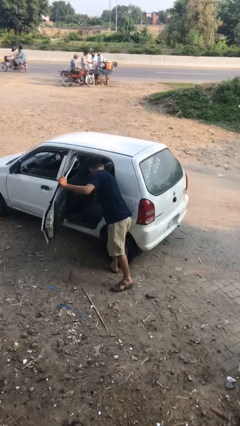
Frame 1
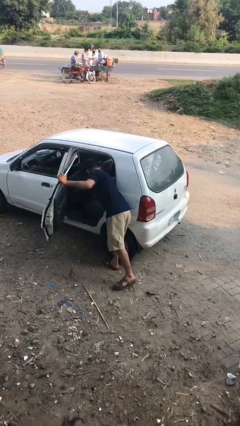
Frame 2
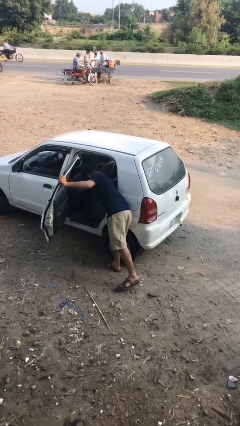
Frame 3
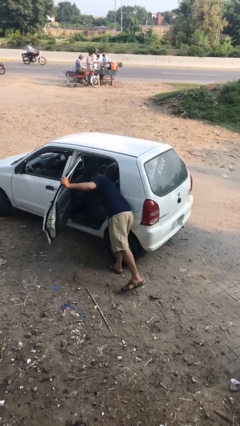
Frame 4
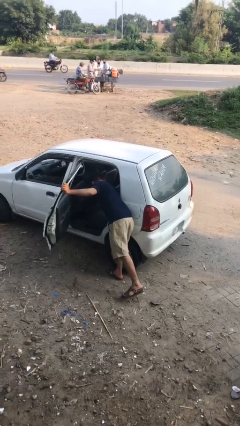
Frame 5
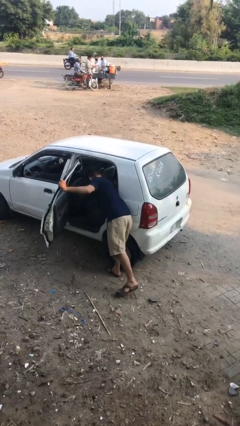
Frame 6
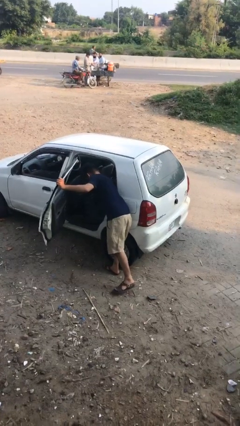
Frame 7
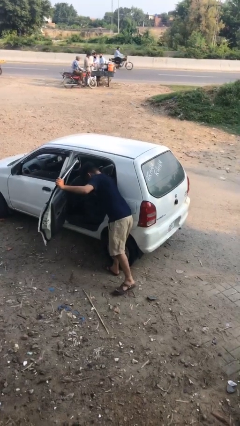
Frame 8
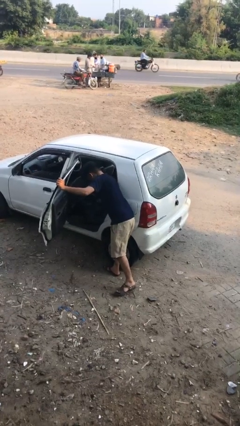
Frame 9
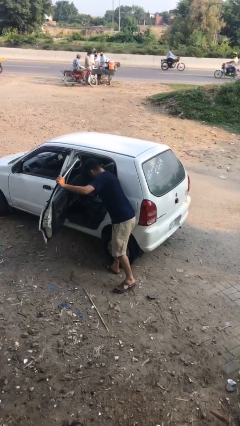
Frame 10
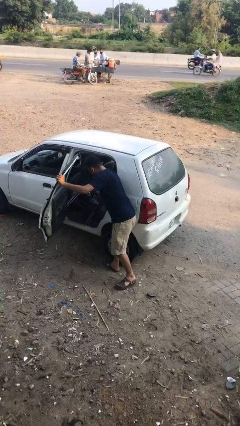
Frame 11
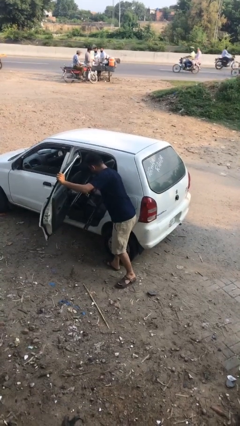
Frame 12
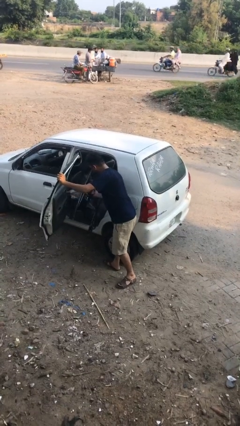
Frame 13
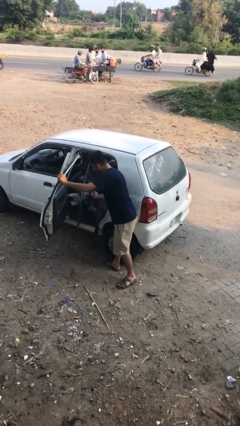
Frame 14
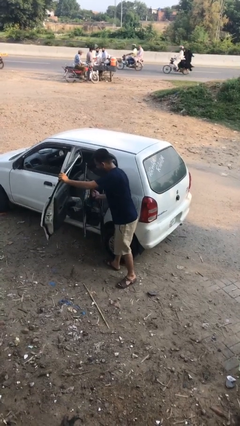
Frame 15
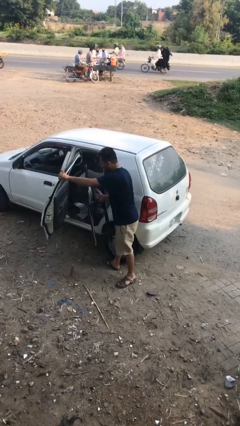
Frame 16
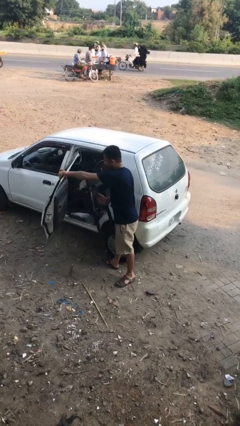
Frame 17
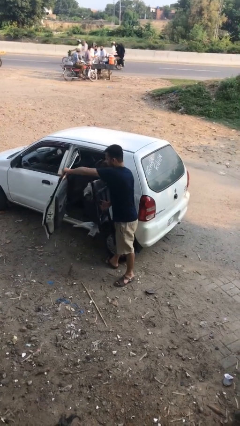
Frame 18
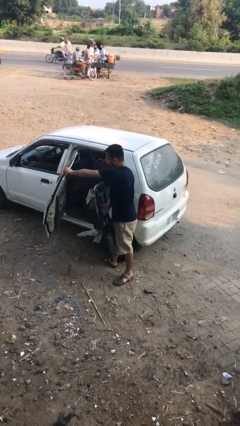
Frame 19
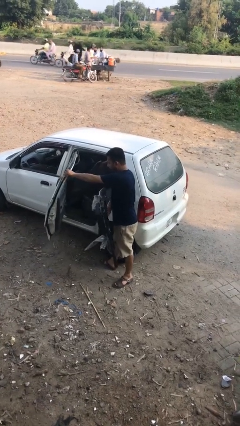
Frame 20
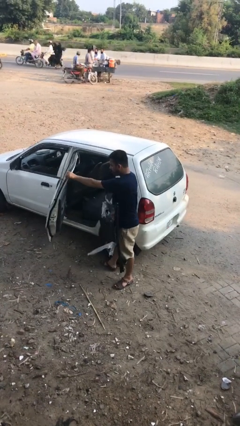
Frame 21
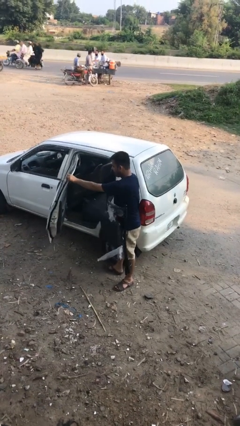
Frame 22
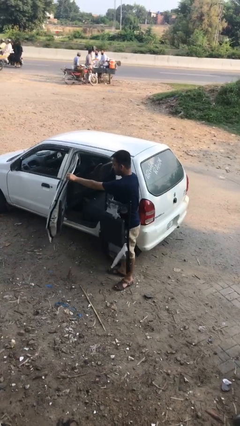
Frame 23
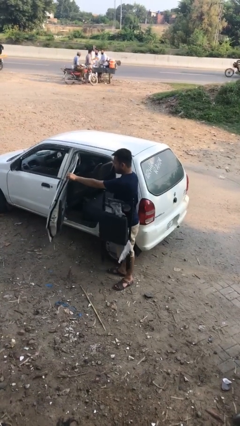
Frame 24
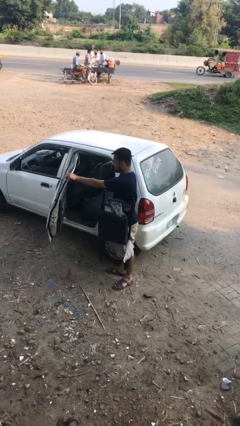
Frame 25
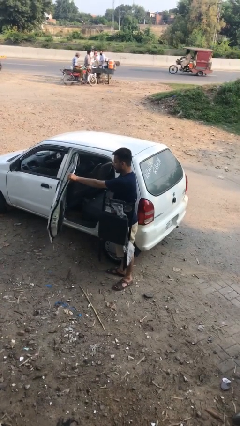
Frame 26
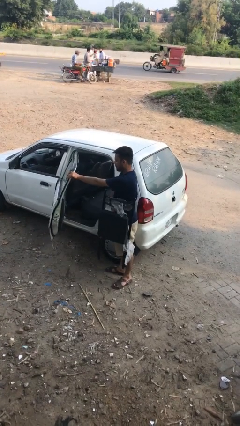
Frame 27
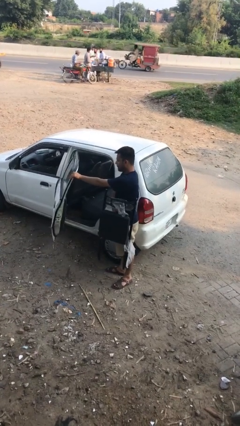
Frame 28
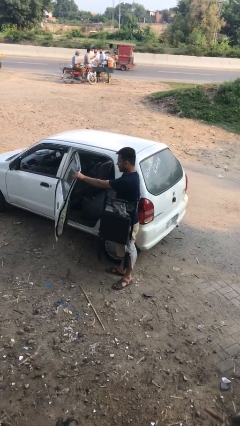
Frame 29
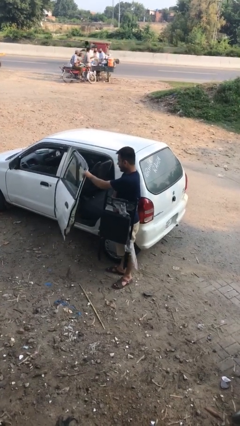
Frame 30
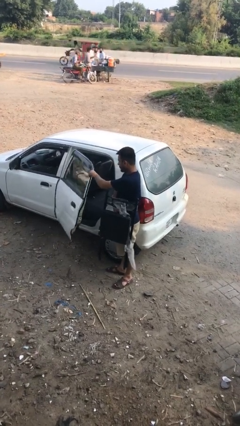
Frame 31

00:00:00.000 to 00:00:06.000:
person unloads car

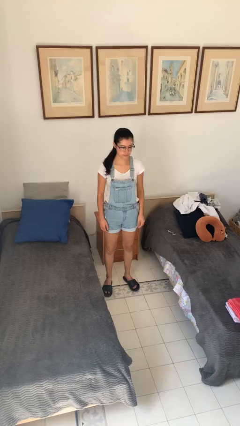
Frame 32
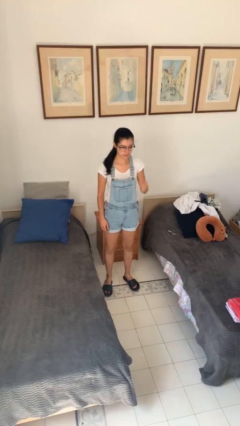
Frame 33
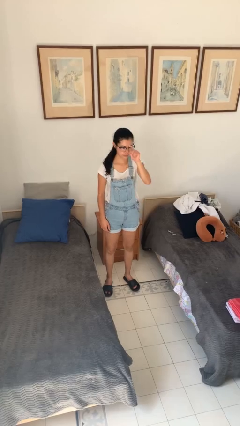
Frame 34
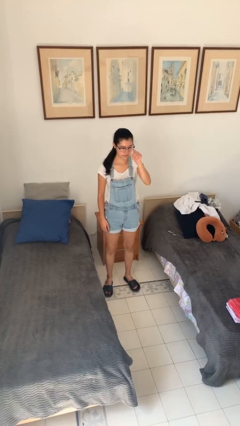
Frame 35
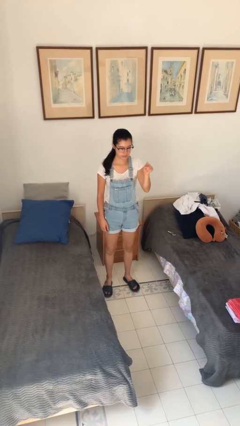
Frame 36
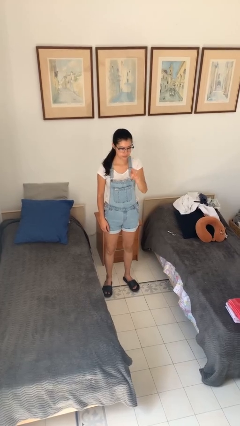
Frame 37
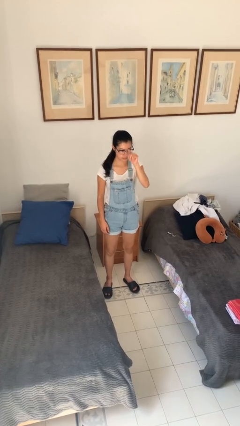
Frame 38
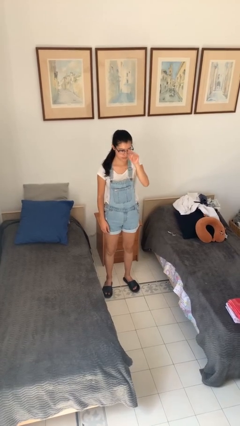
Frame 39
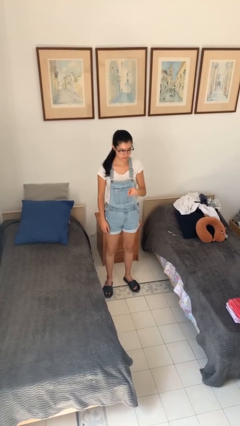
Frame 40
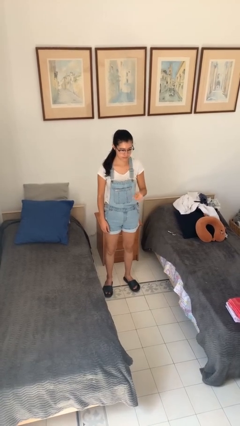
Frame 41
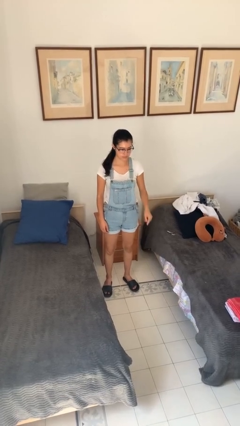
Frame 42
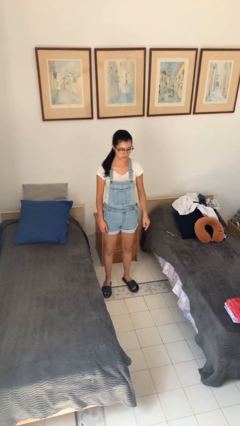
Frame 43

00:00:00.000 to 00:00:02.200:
person gestures number four

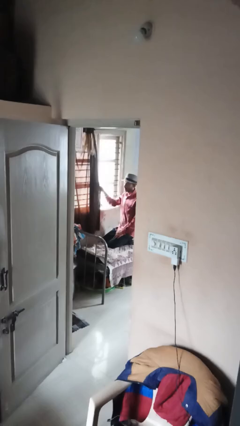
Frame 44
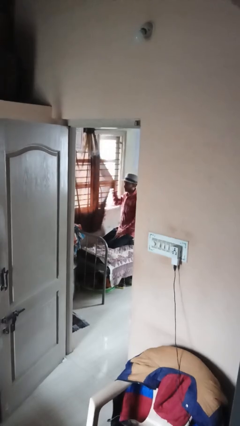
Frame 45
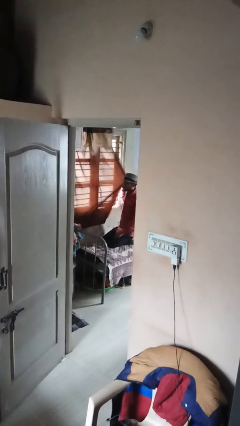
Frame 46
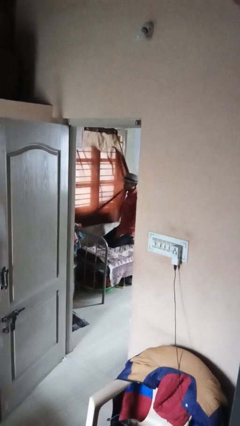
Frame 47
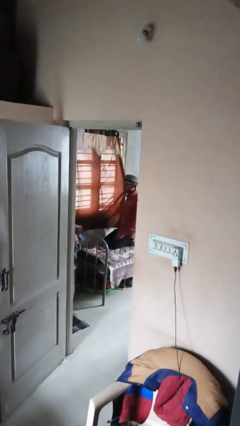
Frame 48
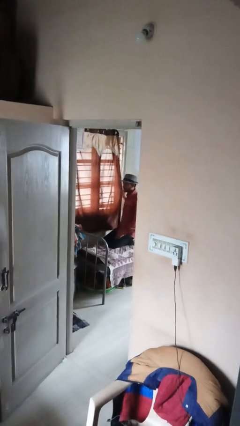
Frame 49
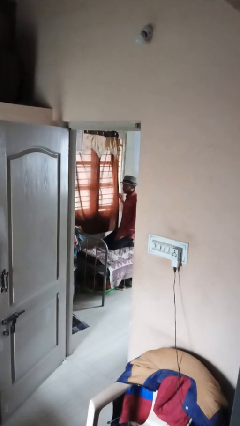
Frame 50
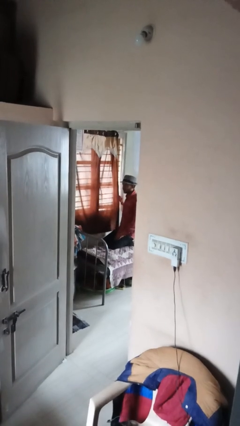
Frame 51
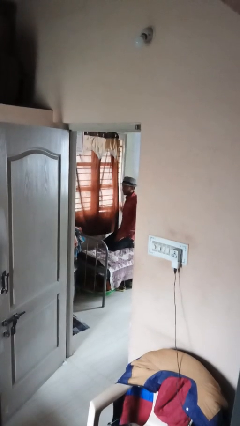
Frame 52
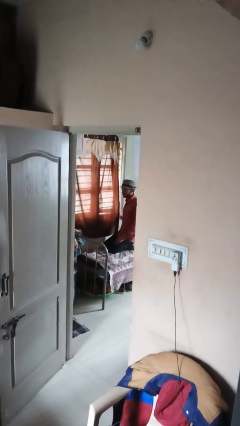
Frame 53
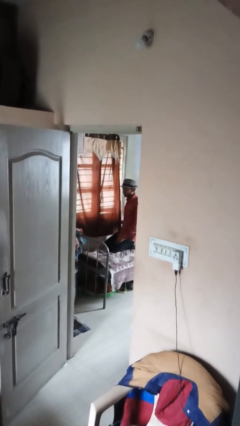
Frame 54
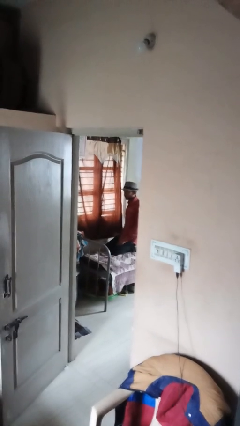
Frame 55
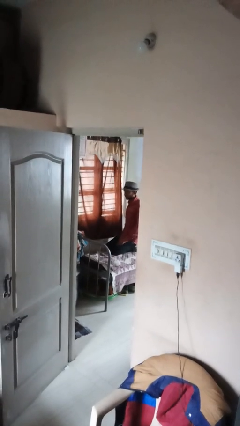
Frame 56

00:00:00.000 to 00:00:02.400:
person closes curtains

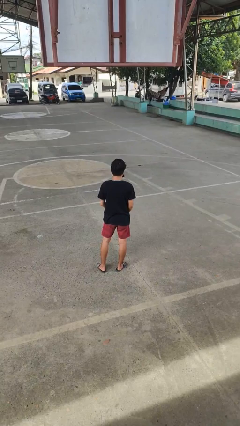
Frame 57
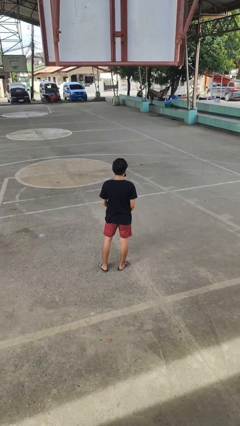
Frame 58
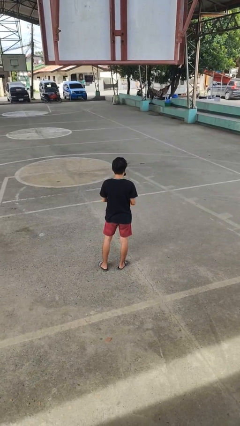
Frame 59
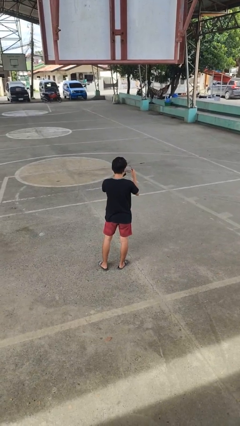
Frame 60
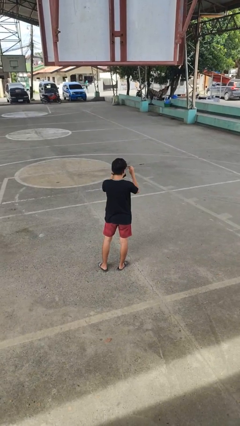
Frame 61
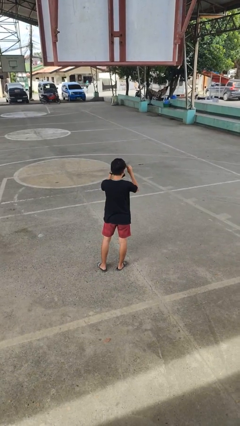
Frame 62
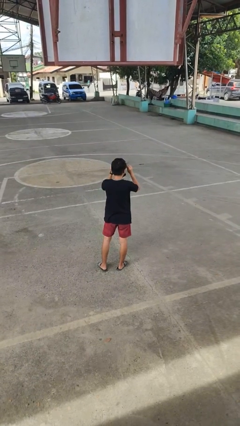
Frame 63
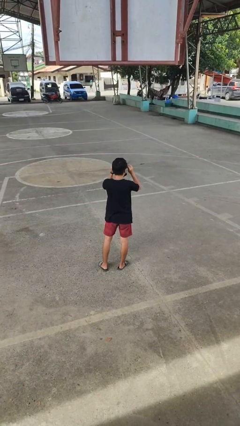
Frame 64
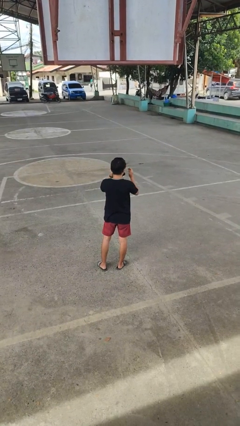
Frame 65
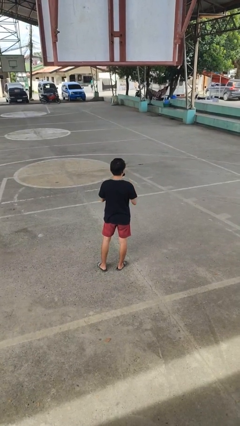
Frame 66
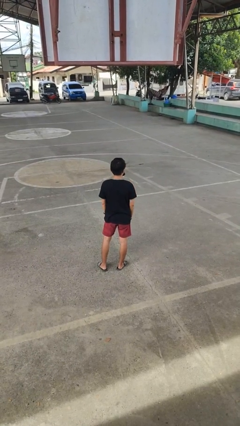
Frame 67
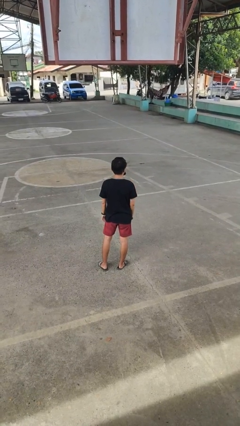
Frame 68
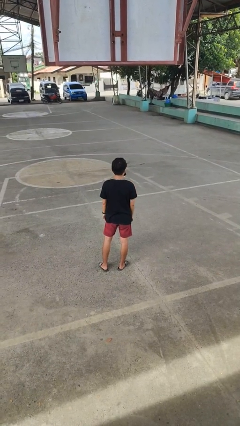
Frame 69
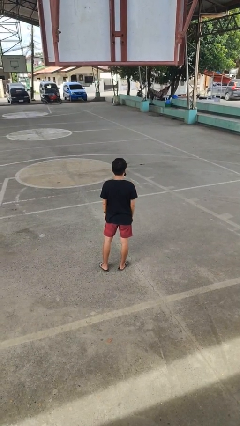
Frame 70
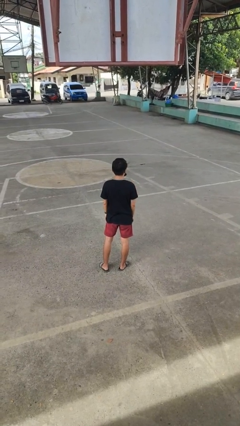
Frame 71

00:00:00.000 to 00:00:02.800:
person puts on glasses

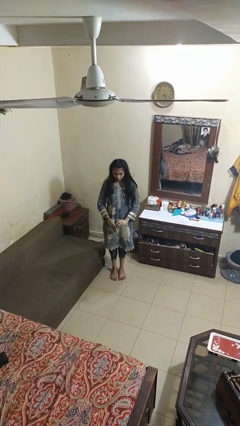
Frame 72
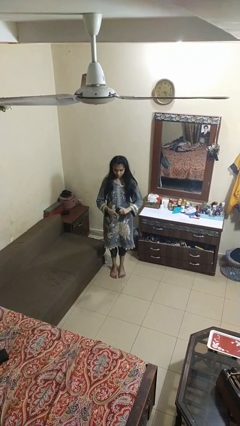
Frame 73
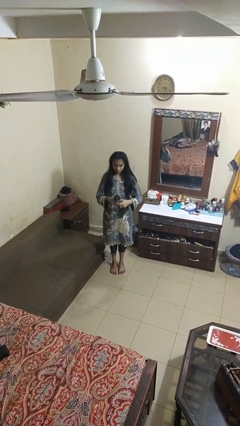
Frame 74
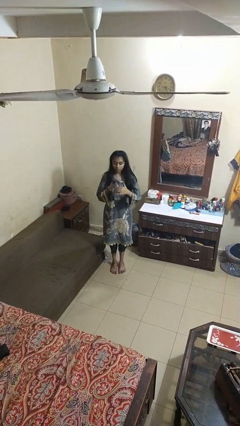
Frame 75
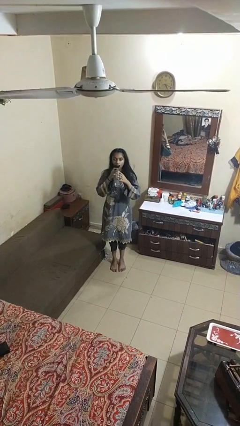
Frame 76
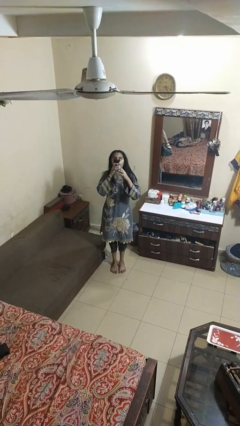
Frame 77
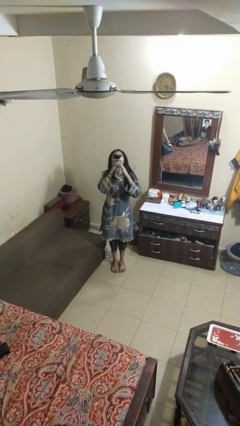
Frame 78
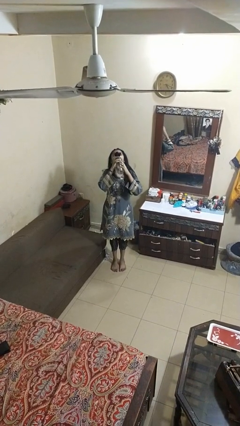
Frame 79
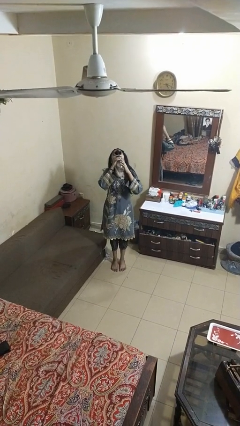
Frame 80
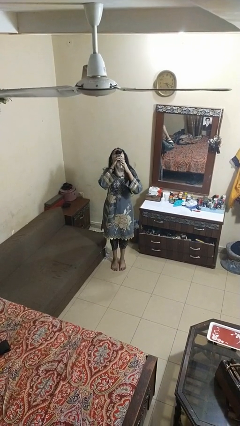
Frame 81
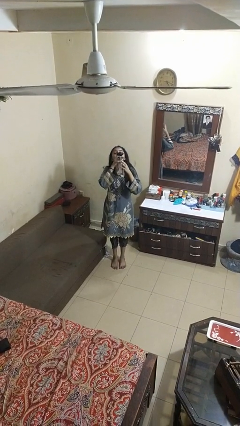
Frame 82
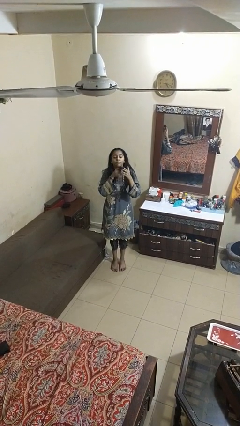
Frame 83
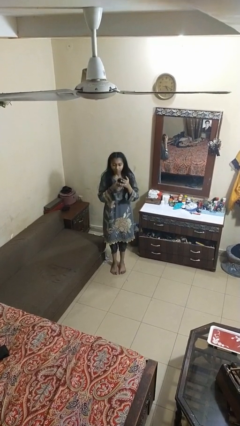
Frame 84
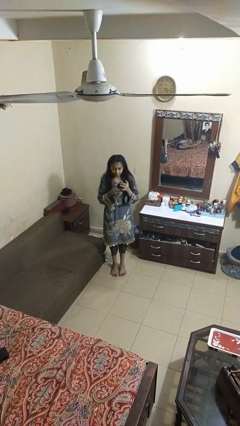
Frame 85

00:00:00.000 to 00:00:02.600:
person drinks from bottle

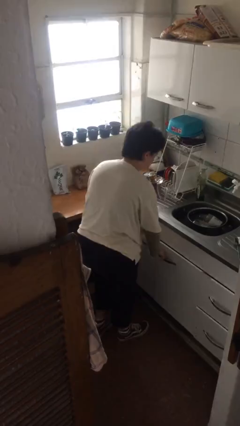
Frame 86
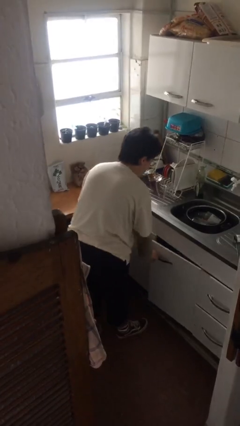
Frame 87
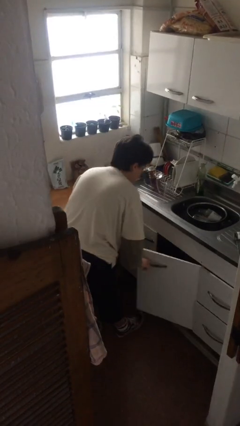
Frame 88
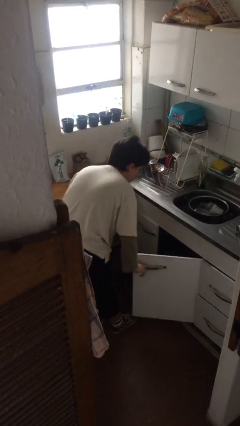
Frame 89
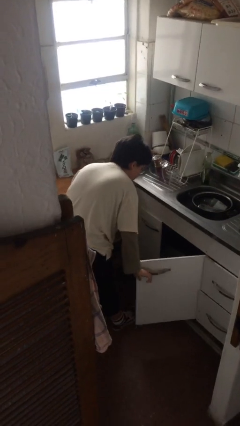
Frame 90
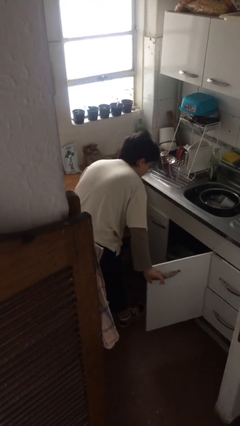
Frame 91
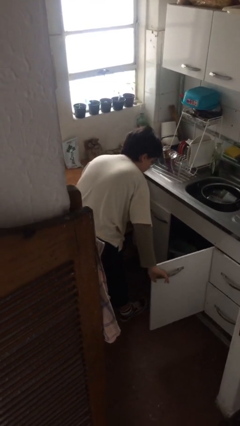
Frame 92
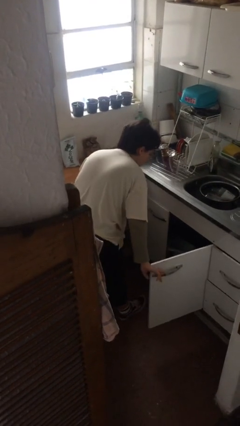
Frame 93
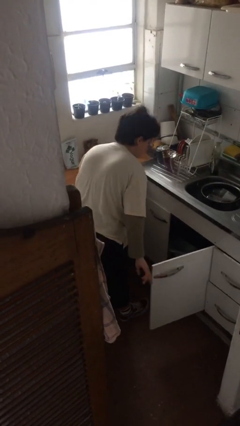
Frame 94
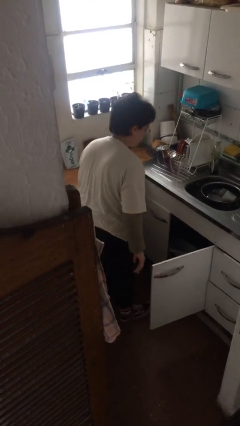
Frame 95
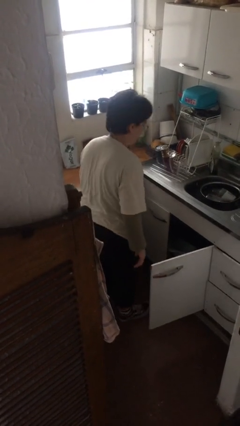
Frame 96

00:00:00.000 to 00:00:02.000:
person opens cabinet
